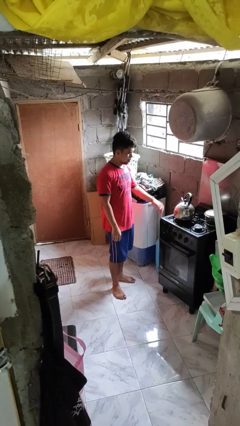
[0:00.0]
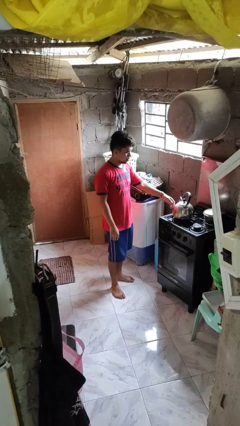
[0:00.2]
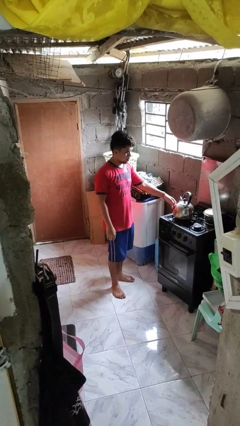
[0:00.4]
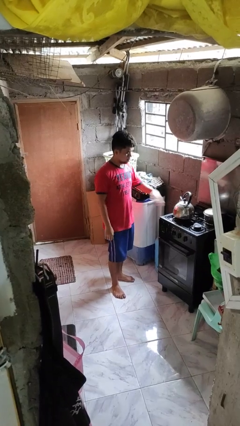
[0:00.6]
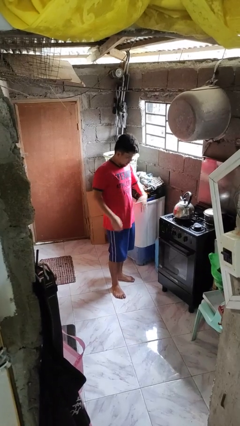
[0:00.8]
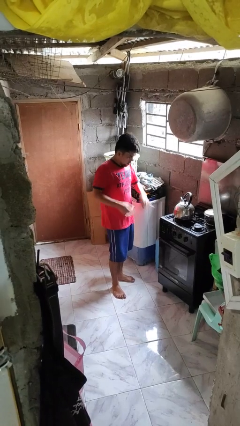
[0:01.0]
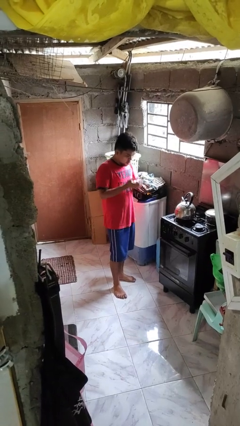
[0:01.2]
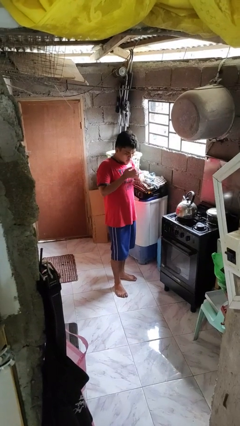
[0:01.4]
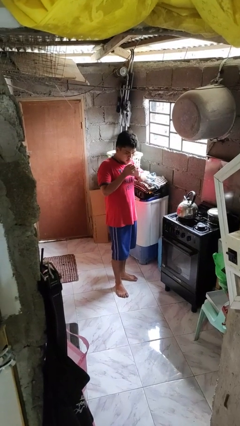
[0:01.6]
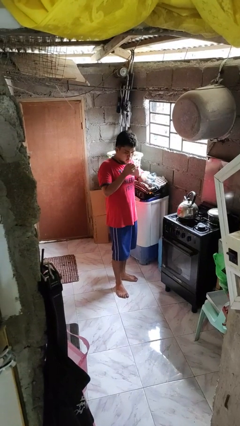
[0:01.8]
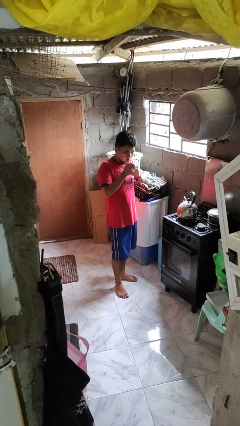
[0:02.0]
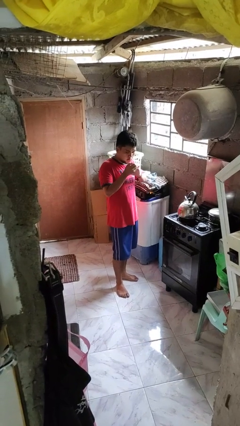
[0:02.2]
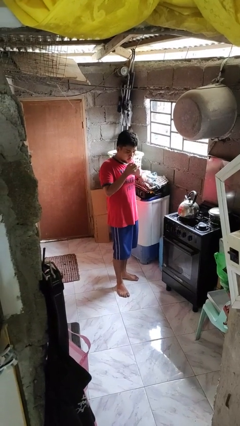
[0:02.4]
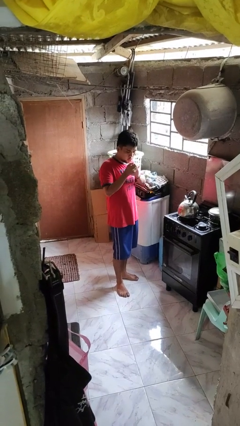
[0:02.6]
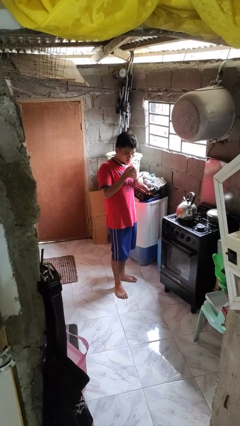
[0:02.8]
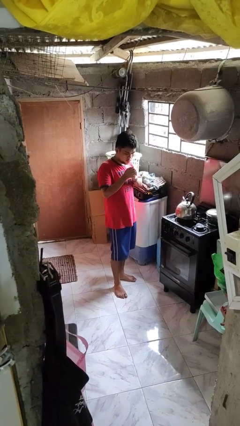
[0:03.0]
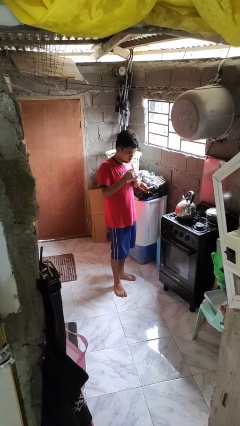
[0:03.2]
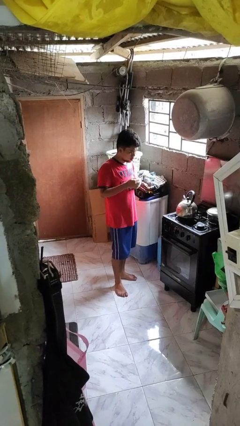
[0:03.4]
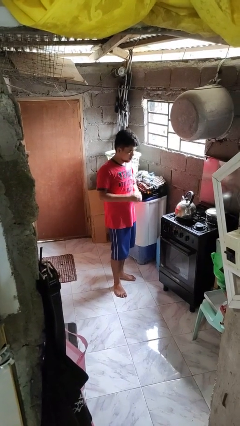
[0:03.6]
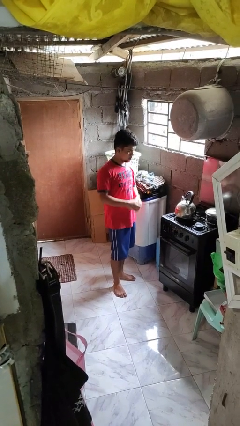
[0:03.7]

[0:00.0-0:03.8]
person burns hand

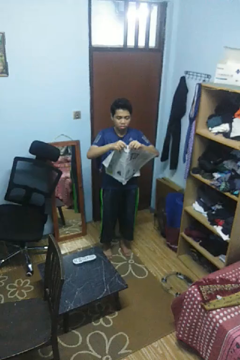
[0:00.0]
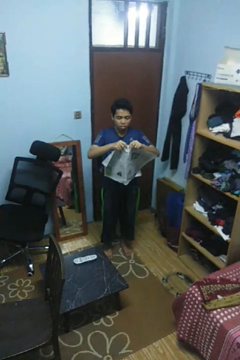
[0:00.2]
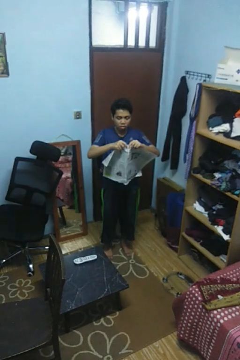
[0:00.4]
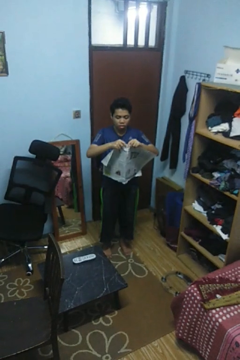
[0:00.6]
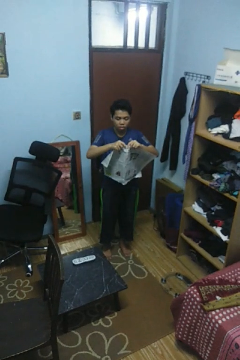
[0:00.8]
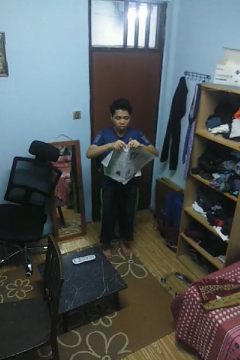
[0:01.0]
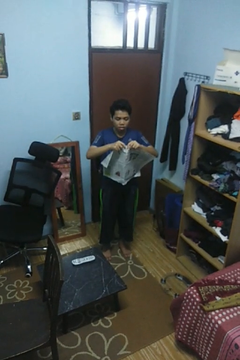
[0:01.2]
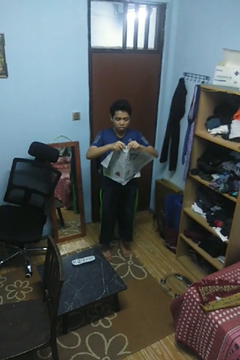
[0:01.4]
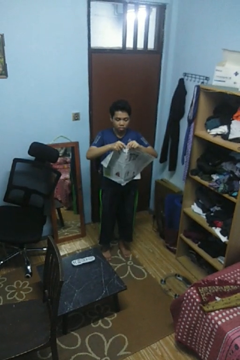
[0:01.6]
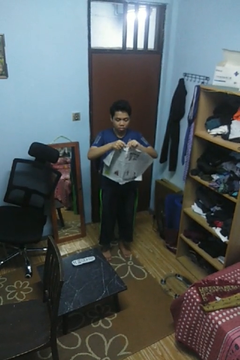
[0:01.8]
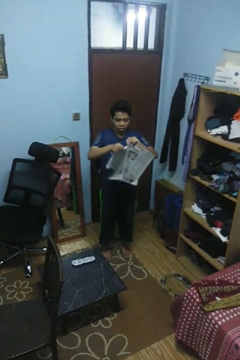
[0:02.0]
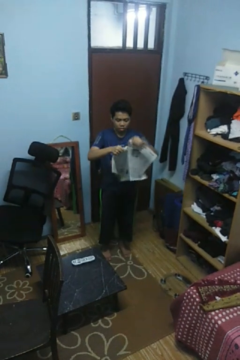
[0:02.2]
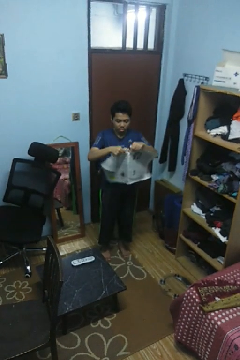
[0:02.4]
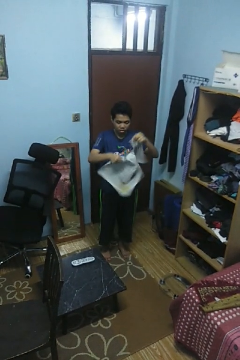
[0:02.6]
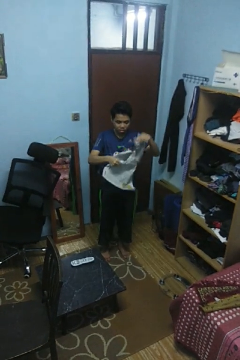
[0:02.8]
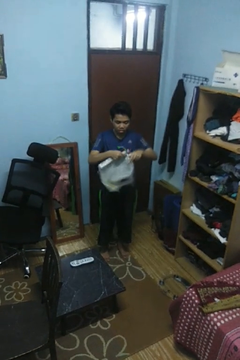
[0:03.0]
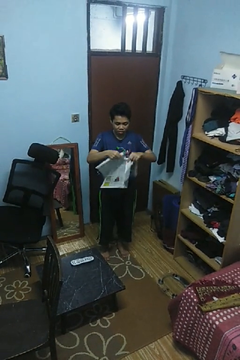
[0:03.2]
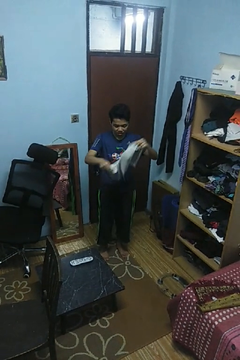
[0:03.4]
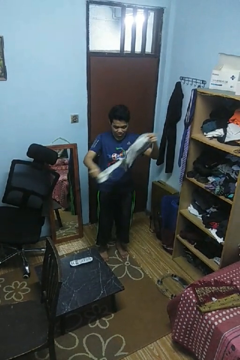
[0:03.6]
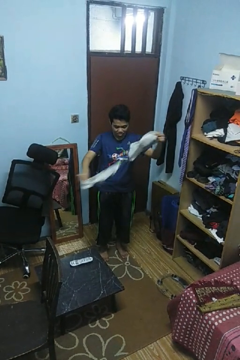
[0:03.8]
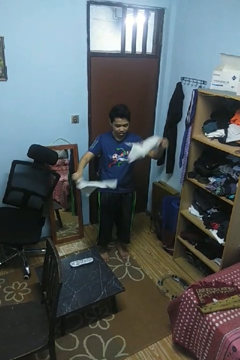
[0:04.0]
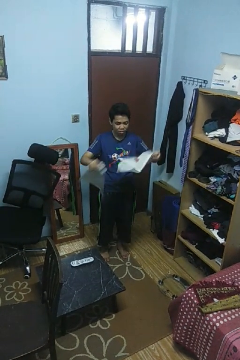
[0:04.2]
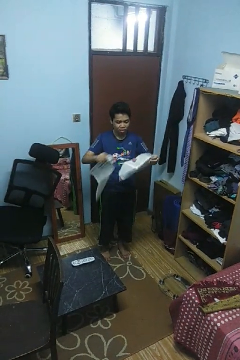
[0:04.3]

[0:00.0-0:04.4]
person tears paper

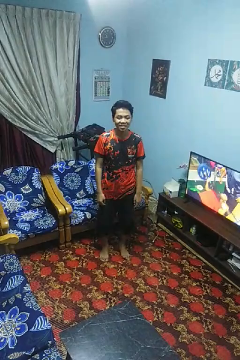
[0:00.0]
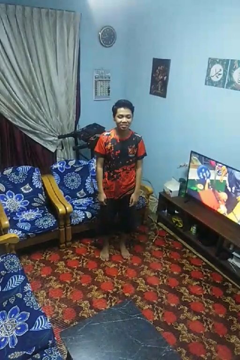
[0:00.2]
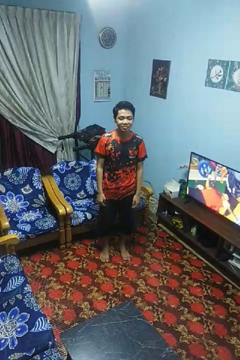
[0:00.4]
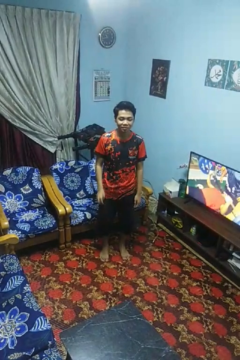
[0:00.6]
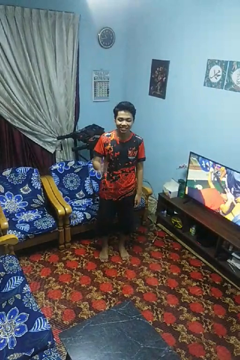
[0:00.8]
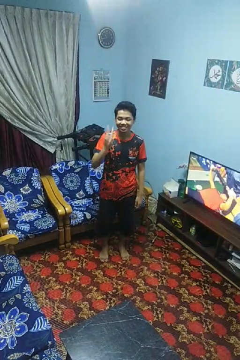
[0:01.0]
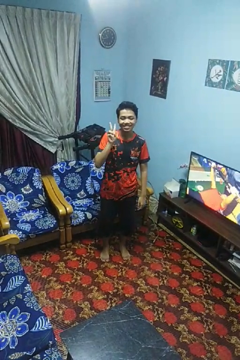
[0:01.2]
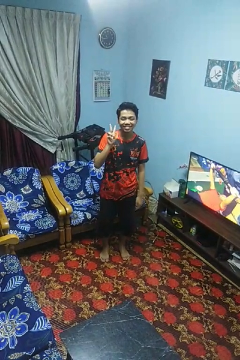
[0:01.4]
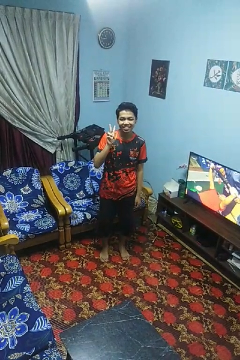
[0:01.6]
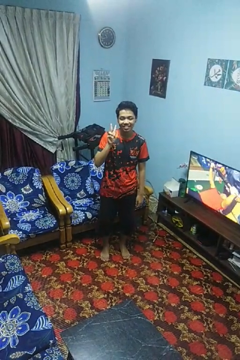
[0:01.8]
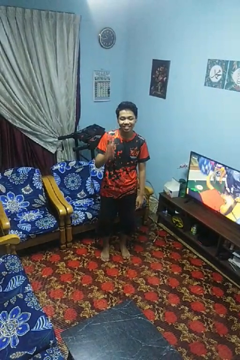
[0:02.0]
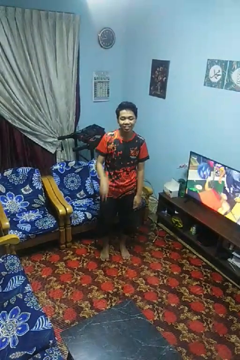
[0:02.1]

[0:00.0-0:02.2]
person gestures peace

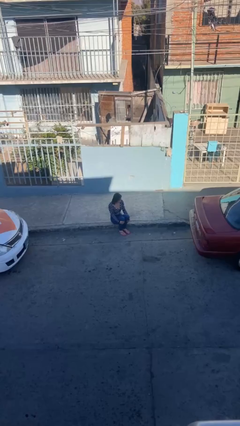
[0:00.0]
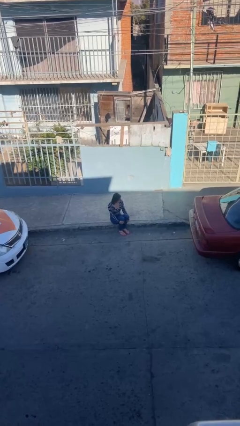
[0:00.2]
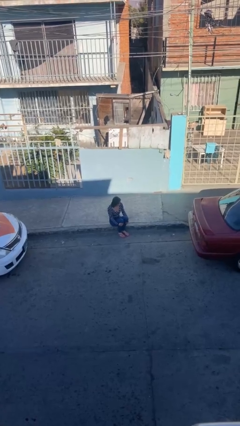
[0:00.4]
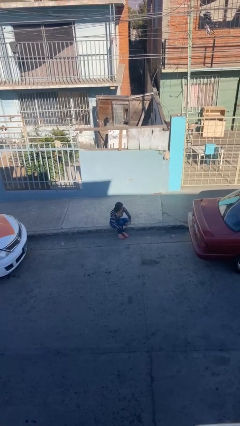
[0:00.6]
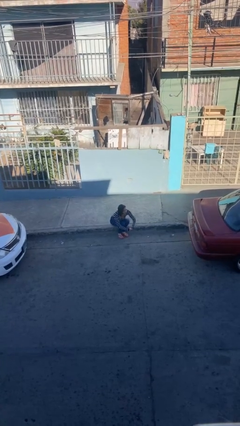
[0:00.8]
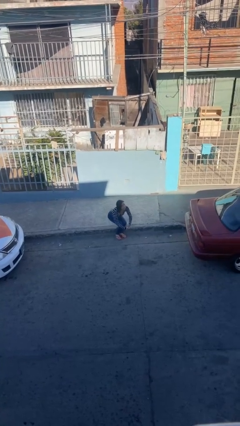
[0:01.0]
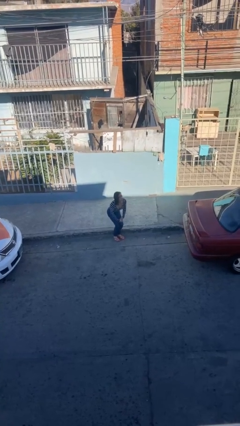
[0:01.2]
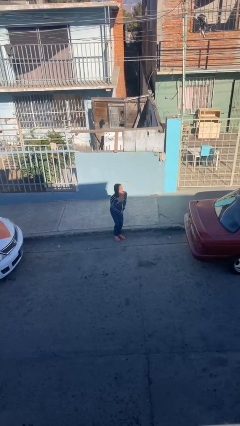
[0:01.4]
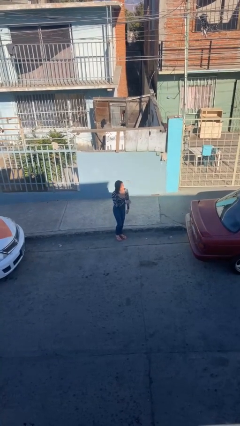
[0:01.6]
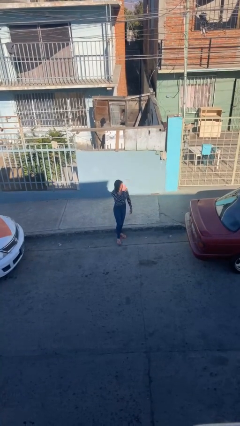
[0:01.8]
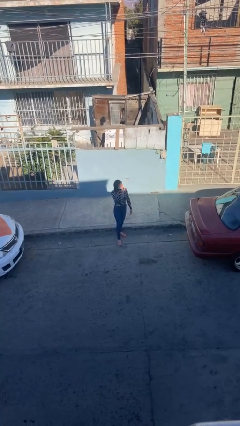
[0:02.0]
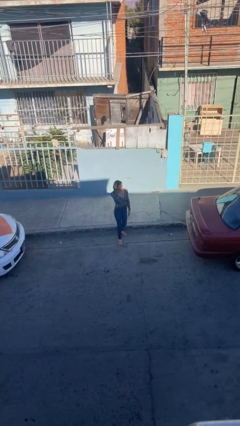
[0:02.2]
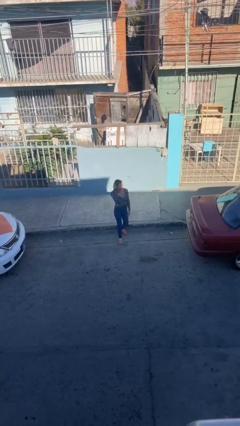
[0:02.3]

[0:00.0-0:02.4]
person stands up

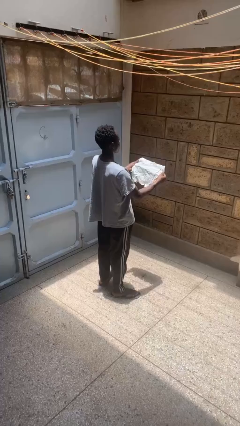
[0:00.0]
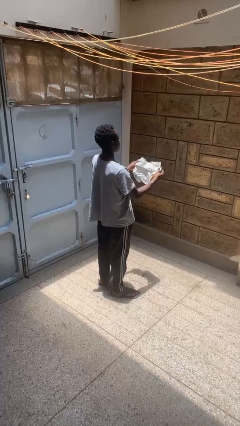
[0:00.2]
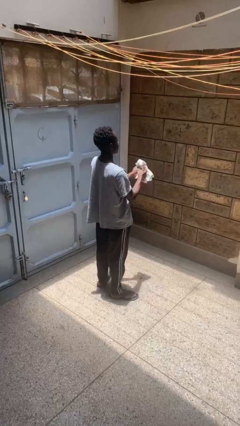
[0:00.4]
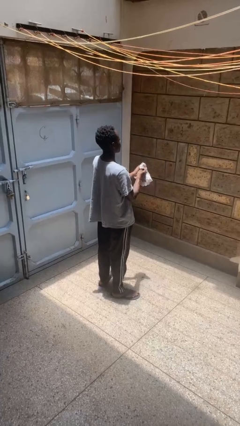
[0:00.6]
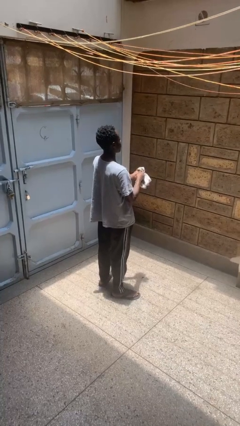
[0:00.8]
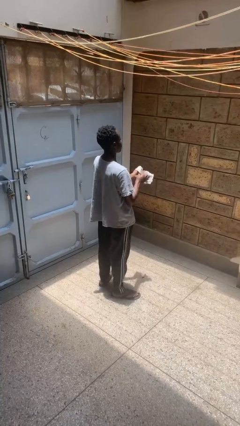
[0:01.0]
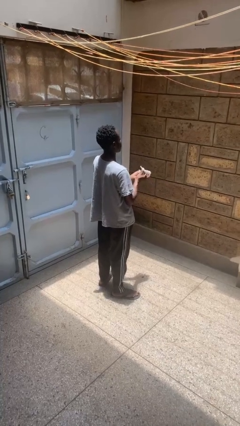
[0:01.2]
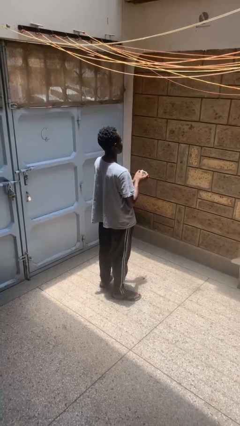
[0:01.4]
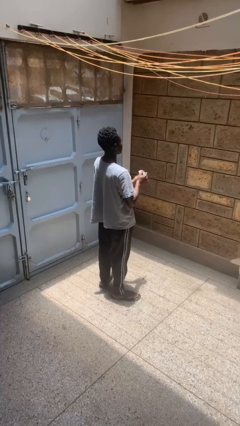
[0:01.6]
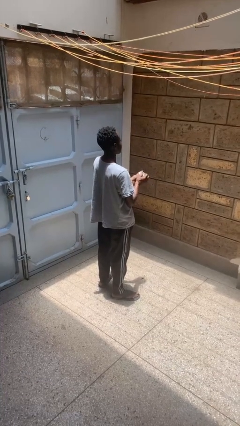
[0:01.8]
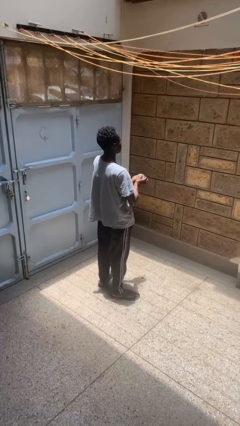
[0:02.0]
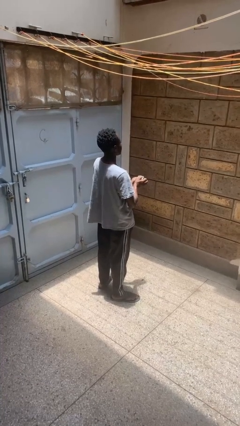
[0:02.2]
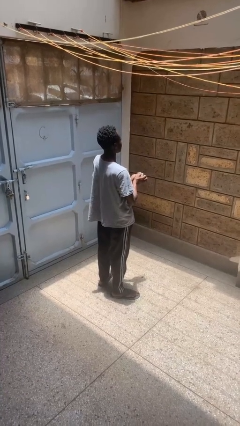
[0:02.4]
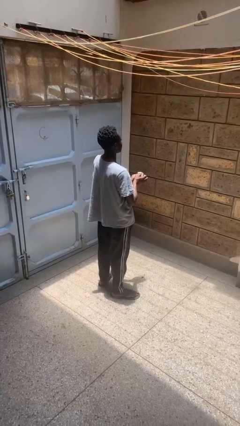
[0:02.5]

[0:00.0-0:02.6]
person crumples paper

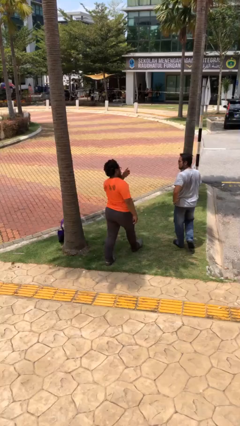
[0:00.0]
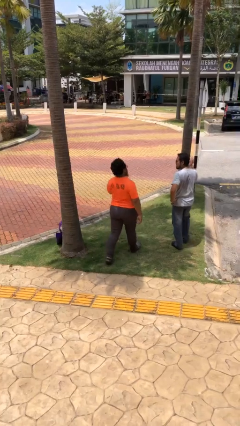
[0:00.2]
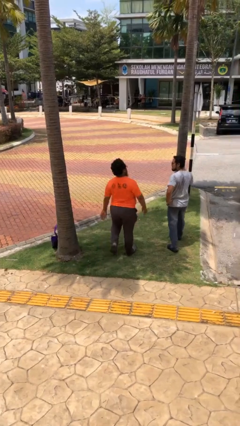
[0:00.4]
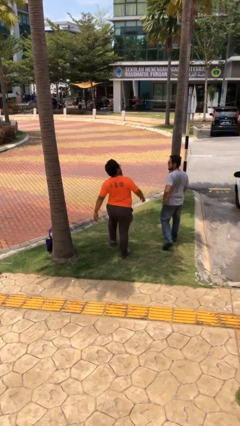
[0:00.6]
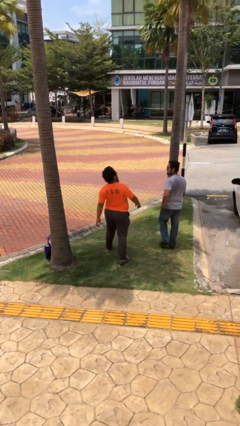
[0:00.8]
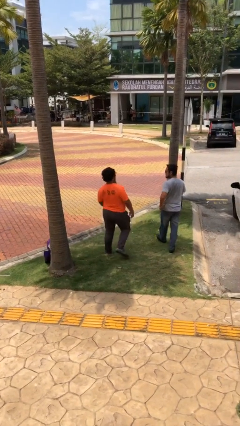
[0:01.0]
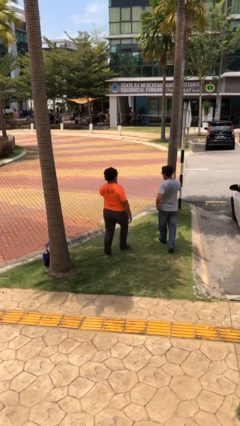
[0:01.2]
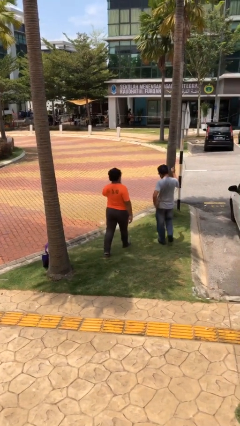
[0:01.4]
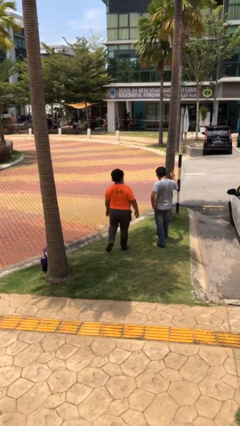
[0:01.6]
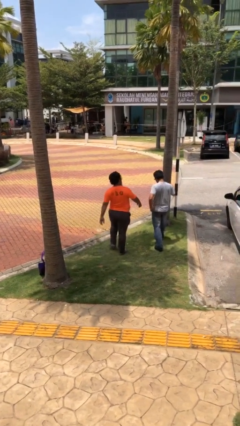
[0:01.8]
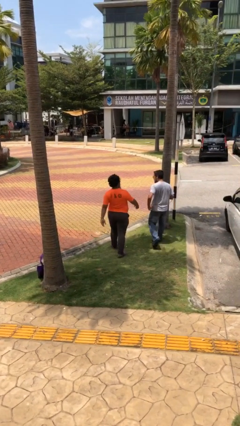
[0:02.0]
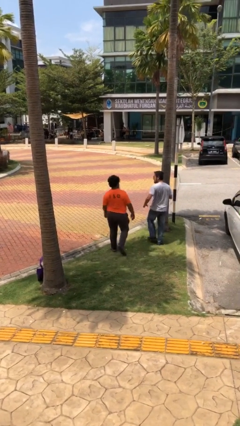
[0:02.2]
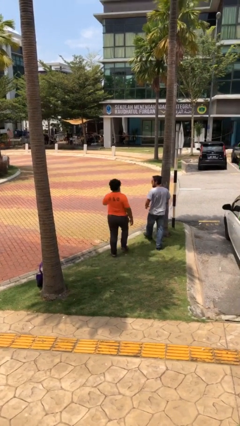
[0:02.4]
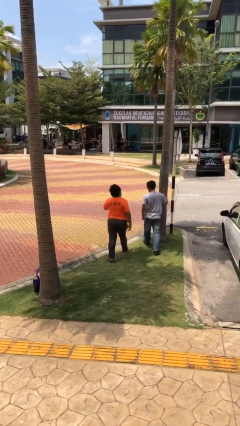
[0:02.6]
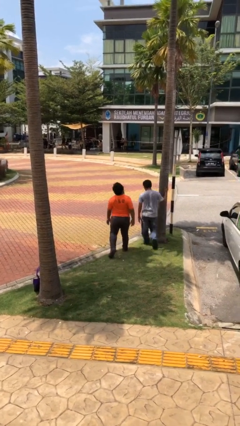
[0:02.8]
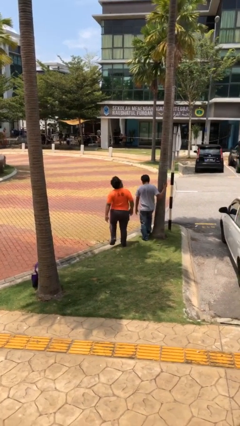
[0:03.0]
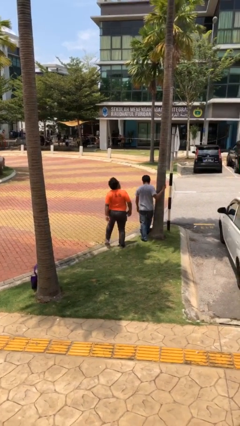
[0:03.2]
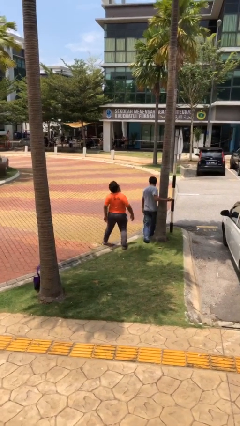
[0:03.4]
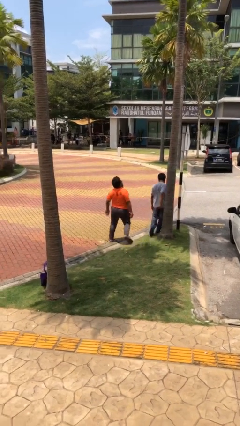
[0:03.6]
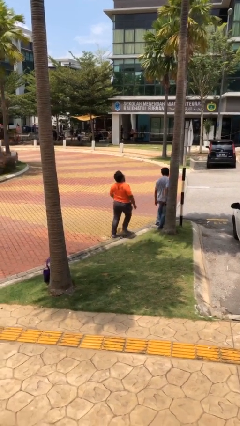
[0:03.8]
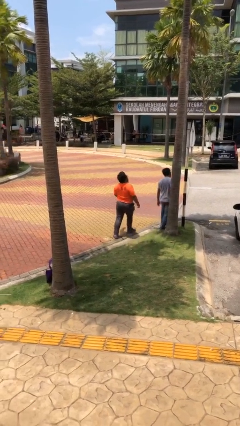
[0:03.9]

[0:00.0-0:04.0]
person talks to person
